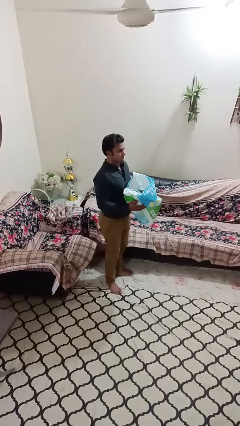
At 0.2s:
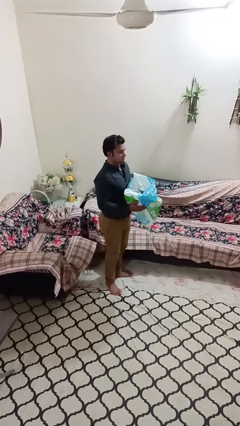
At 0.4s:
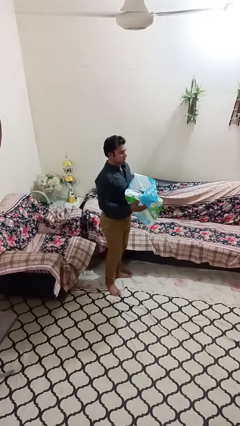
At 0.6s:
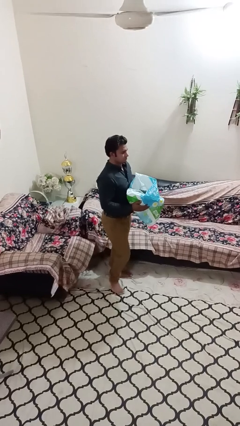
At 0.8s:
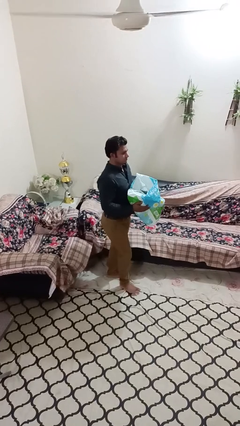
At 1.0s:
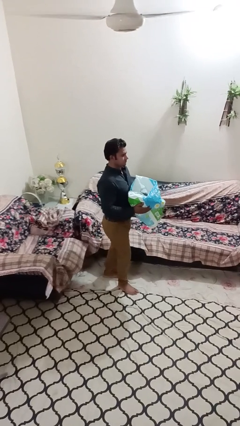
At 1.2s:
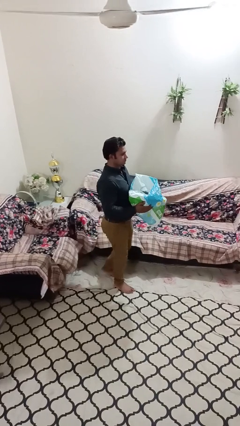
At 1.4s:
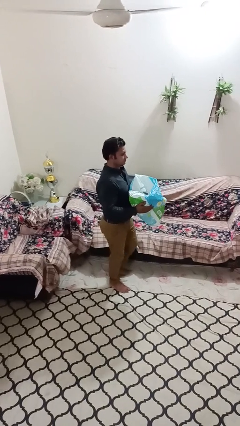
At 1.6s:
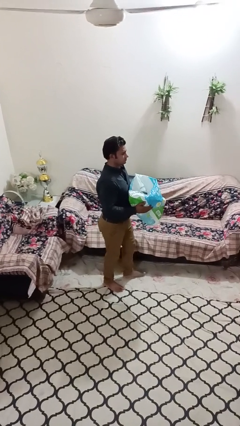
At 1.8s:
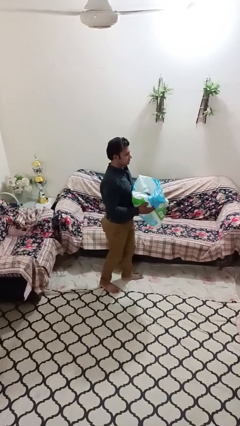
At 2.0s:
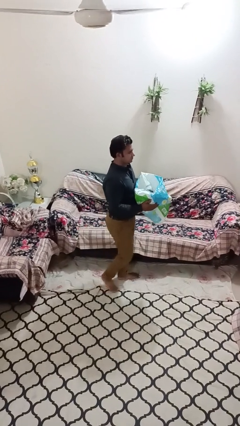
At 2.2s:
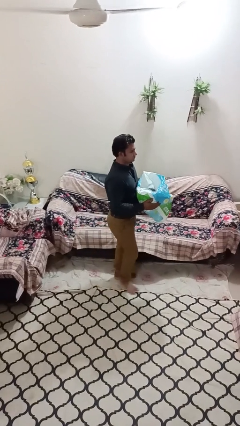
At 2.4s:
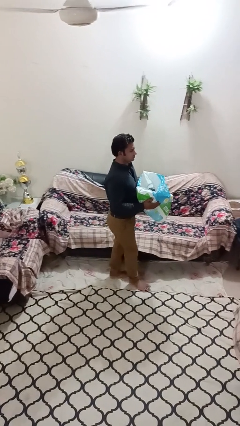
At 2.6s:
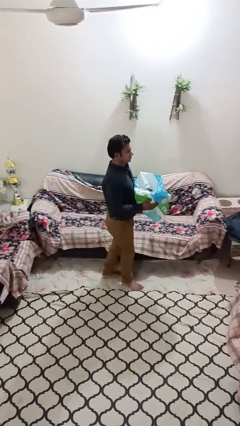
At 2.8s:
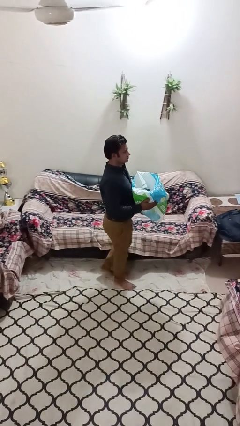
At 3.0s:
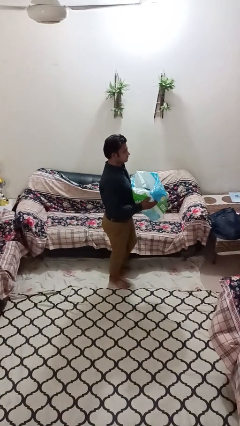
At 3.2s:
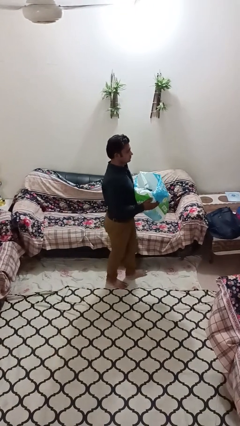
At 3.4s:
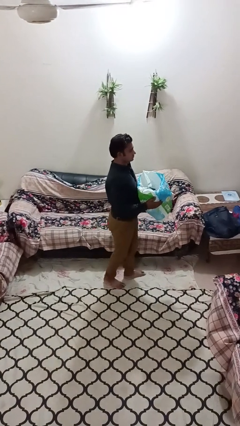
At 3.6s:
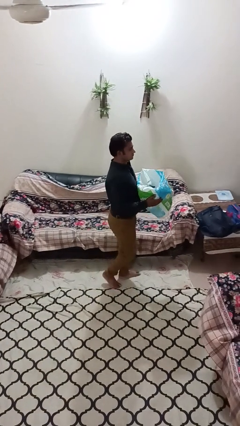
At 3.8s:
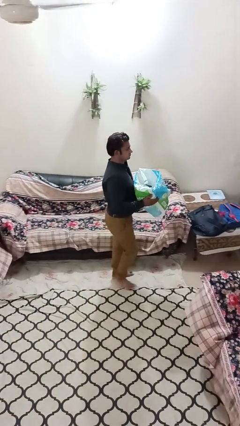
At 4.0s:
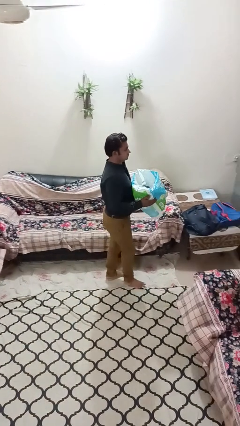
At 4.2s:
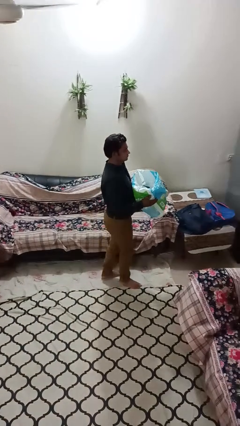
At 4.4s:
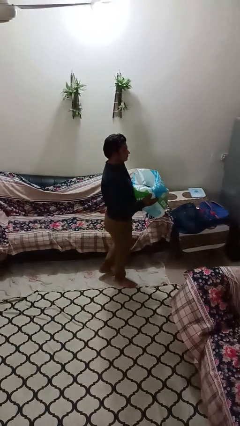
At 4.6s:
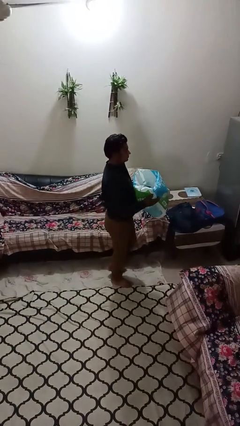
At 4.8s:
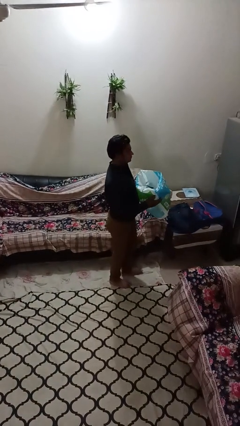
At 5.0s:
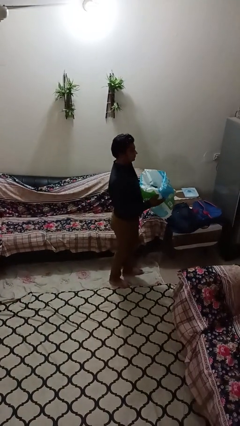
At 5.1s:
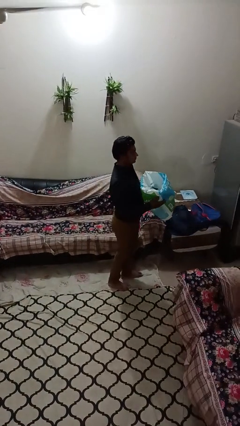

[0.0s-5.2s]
person carries groceries

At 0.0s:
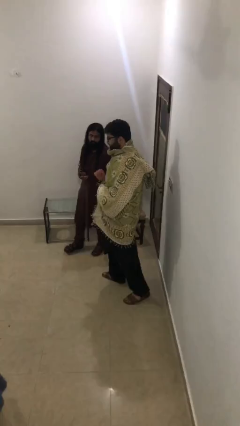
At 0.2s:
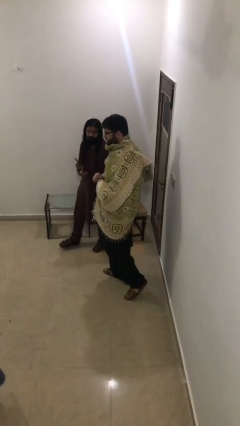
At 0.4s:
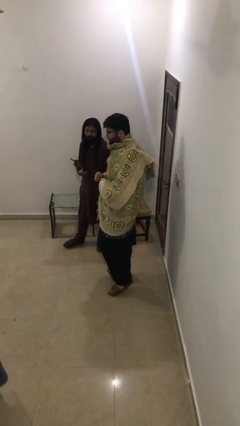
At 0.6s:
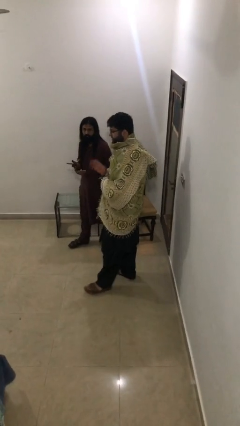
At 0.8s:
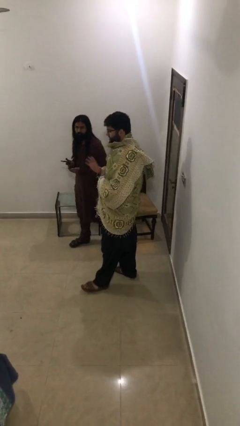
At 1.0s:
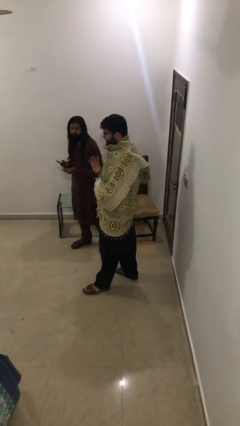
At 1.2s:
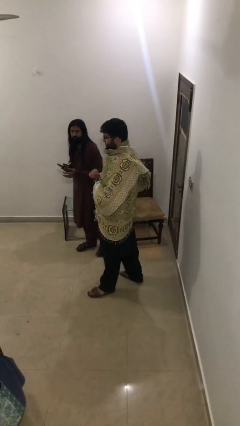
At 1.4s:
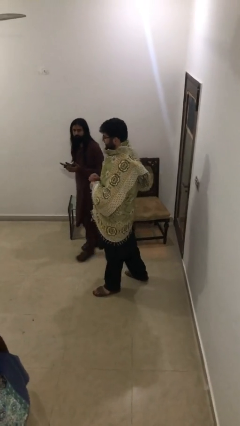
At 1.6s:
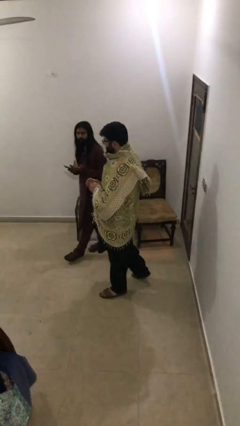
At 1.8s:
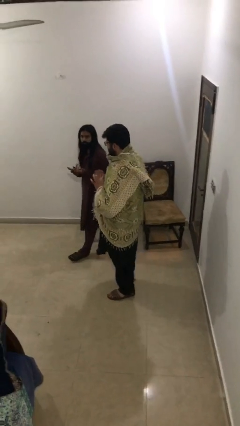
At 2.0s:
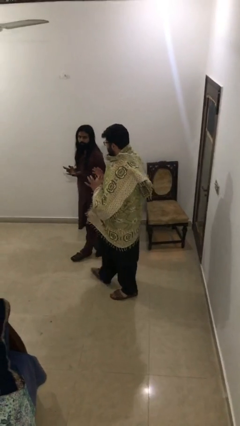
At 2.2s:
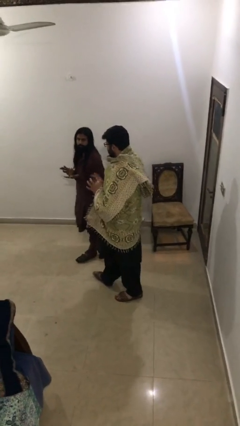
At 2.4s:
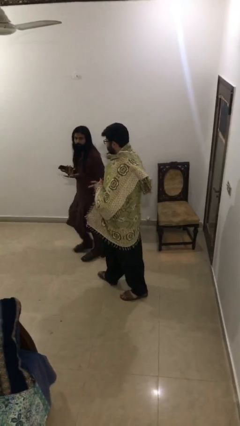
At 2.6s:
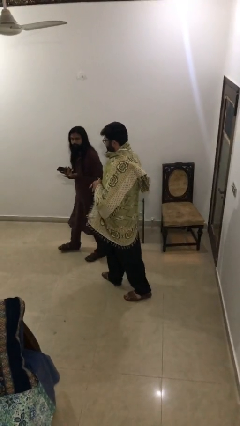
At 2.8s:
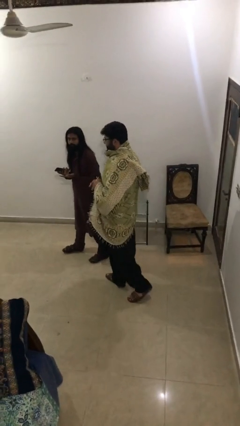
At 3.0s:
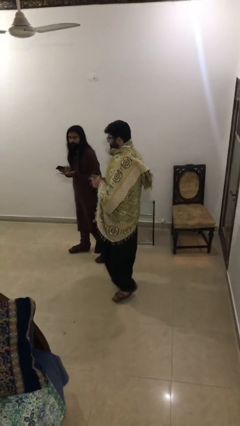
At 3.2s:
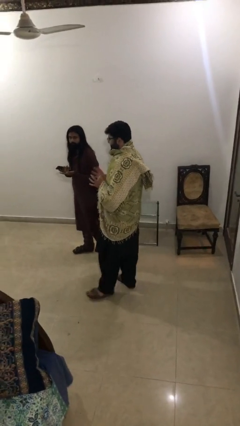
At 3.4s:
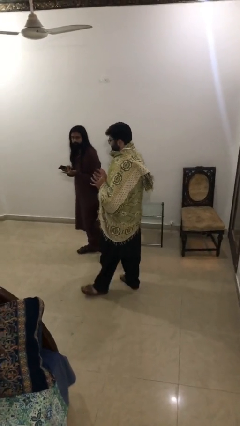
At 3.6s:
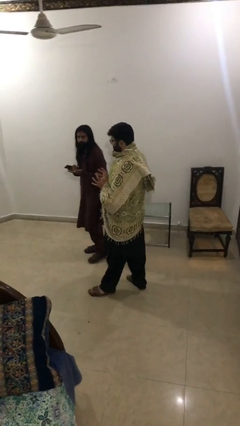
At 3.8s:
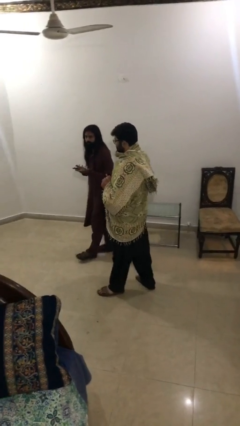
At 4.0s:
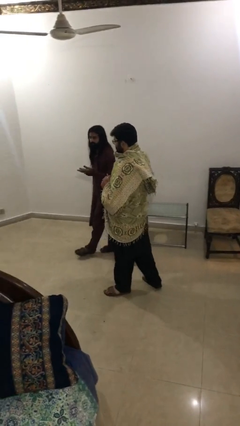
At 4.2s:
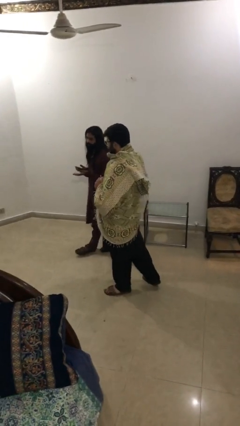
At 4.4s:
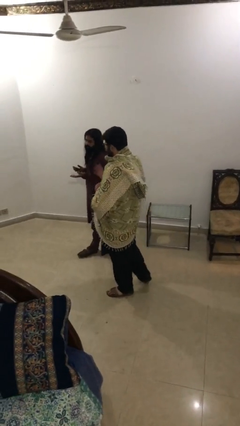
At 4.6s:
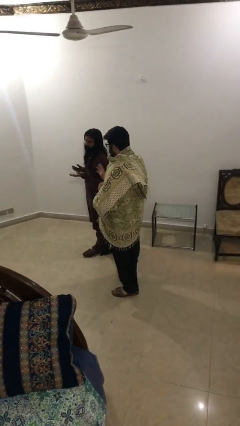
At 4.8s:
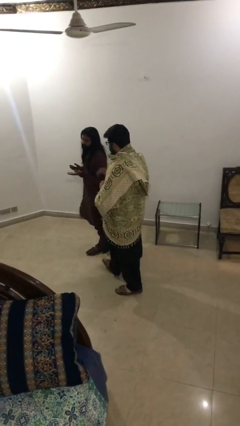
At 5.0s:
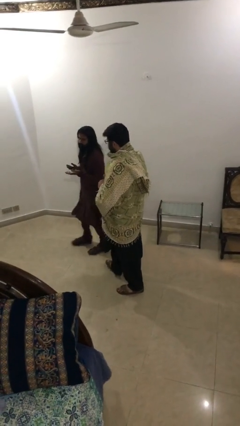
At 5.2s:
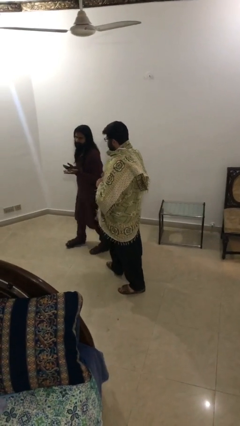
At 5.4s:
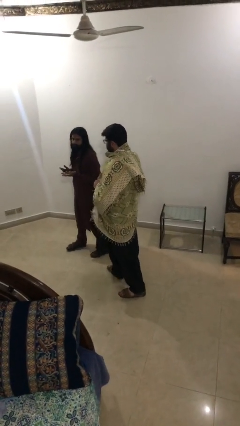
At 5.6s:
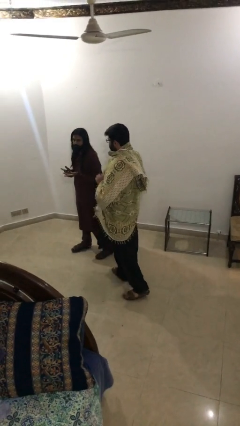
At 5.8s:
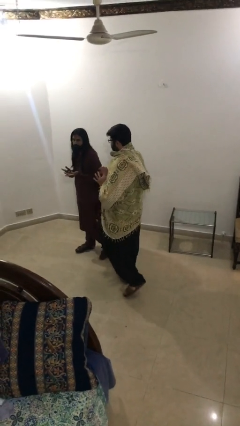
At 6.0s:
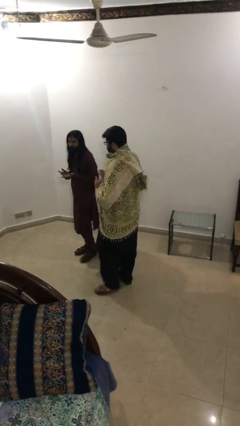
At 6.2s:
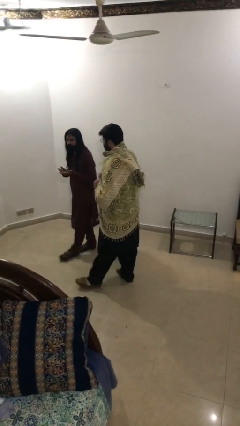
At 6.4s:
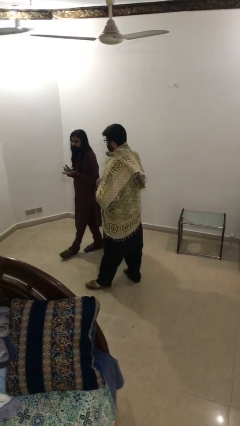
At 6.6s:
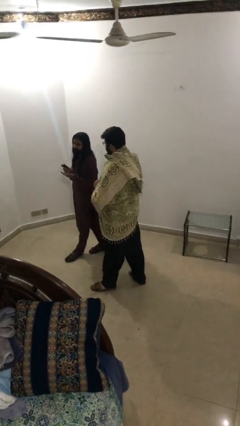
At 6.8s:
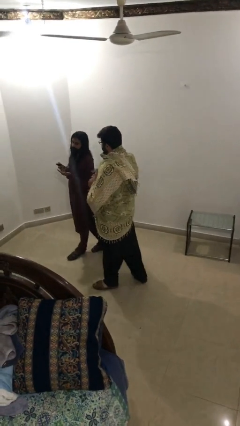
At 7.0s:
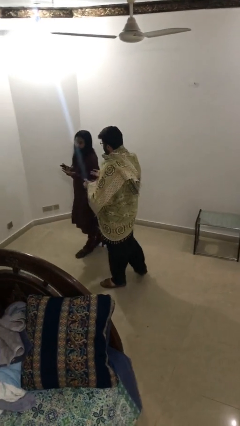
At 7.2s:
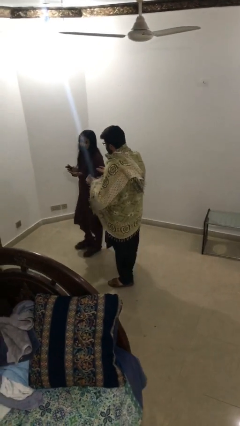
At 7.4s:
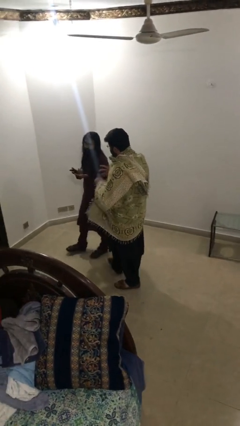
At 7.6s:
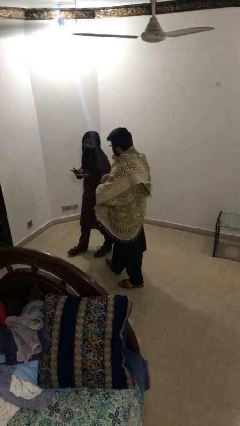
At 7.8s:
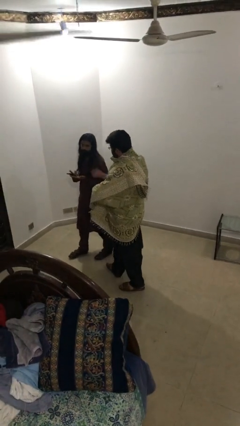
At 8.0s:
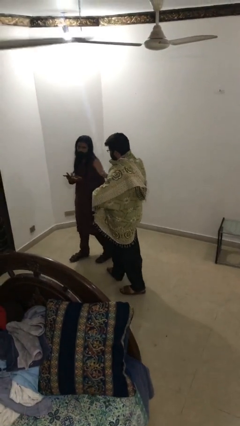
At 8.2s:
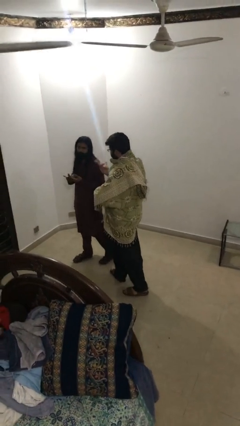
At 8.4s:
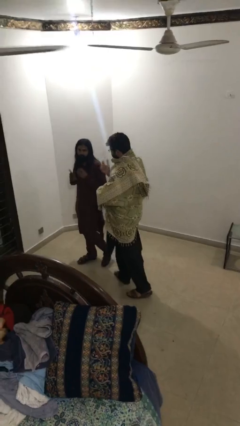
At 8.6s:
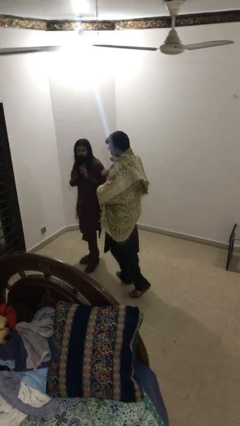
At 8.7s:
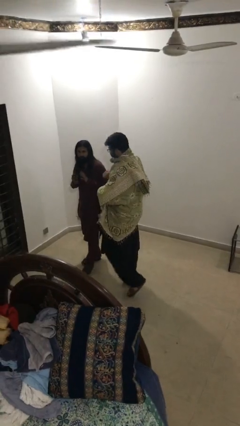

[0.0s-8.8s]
person talks to person

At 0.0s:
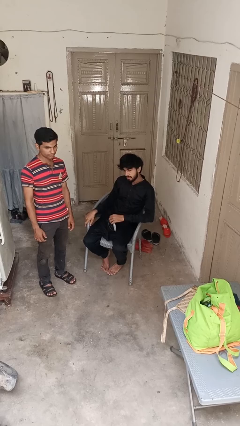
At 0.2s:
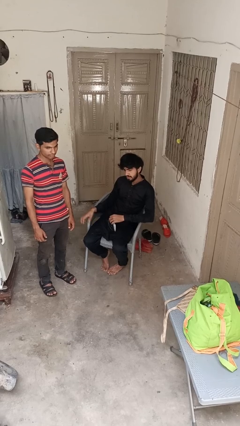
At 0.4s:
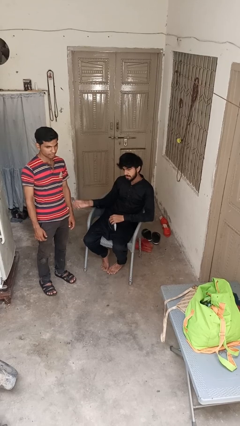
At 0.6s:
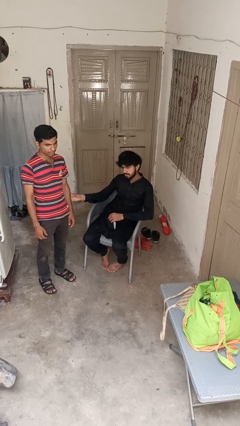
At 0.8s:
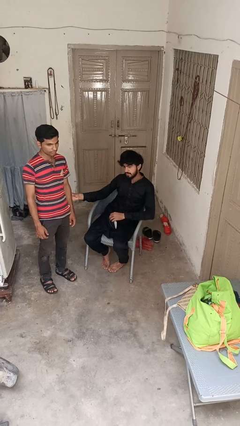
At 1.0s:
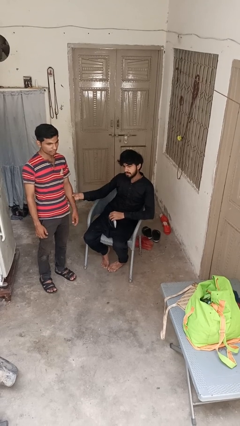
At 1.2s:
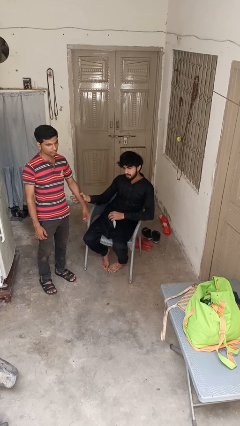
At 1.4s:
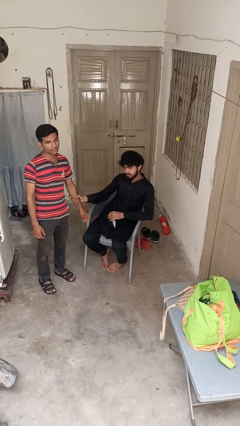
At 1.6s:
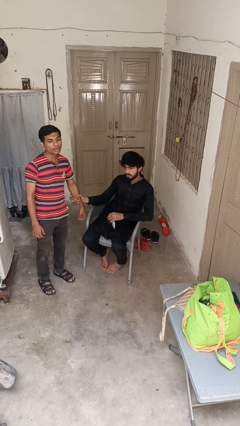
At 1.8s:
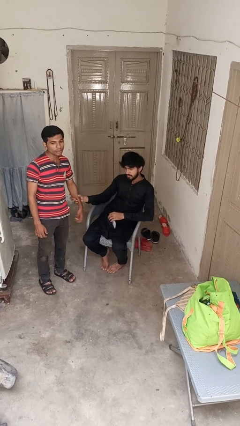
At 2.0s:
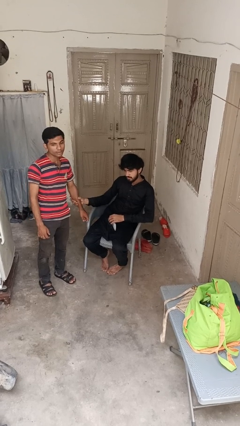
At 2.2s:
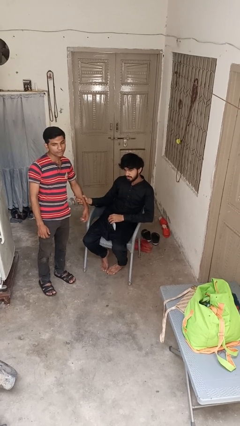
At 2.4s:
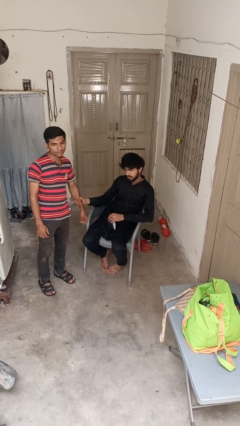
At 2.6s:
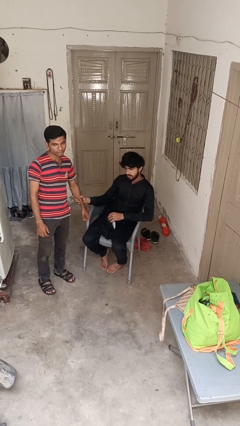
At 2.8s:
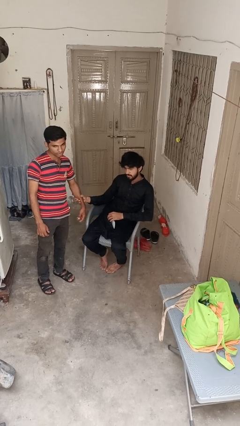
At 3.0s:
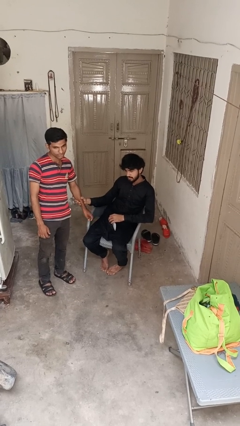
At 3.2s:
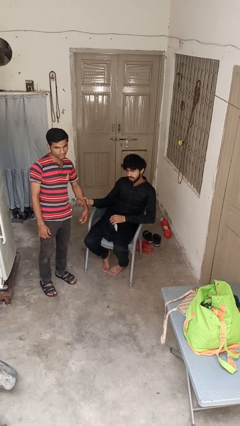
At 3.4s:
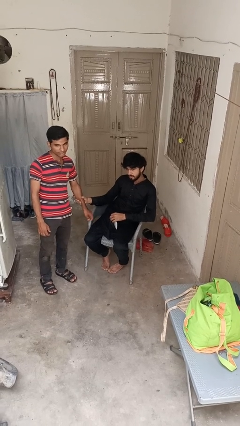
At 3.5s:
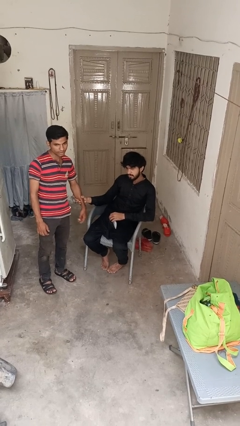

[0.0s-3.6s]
person grabs person by forearm

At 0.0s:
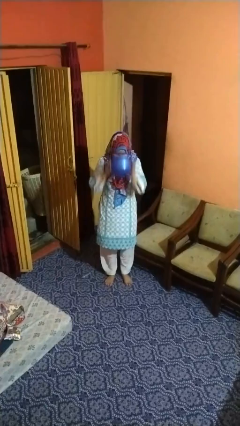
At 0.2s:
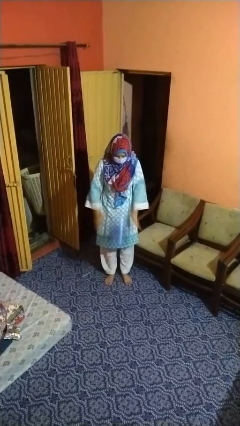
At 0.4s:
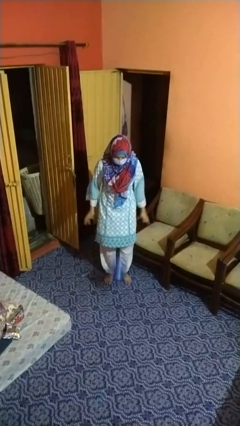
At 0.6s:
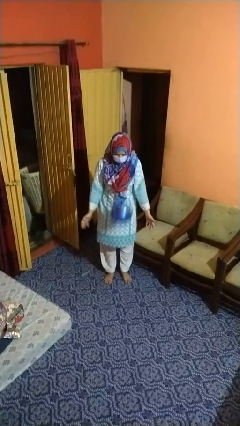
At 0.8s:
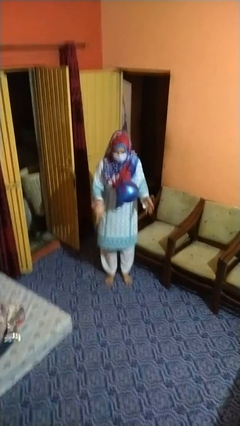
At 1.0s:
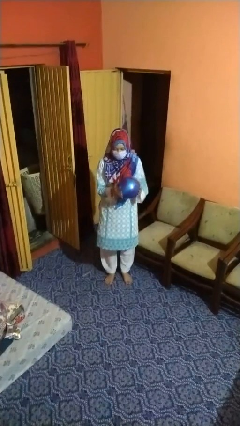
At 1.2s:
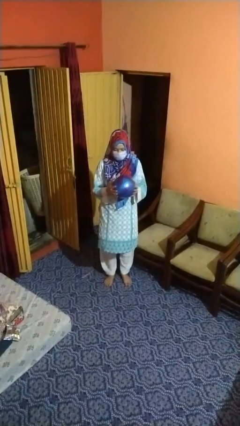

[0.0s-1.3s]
person bounces ball on floor
